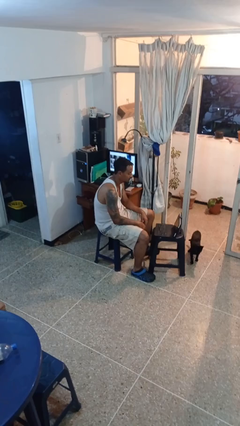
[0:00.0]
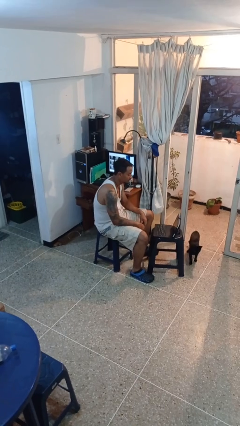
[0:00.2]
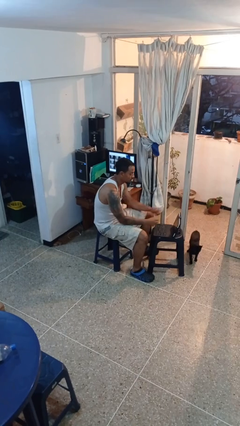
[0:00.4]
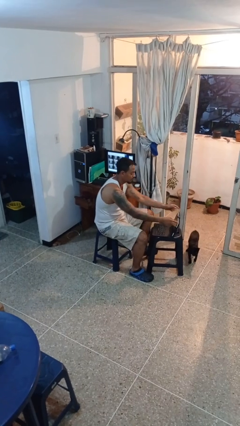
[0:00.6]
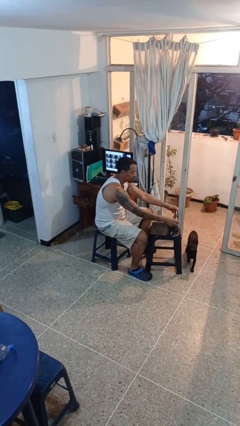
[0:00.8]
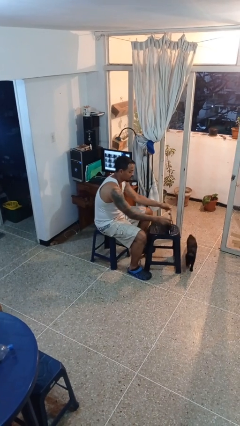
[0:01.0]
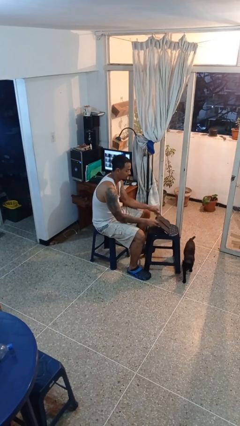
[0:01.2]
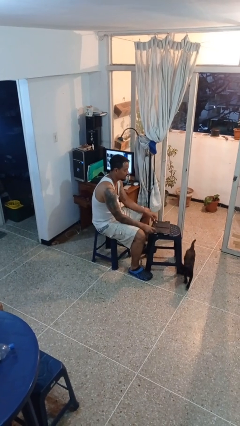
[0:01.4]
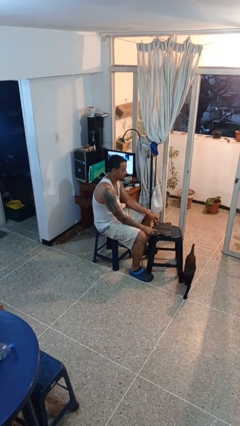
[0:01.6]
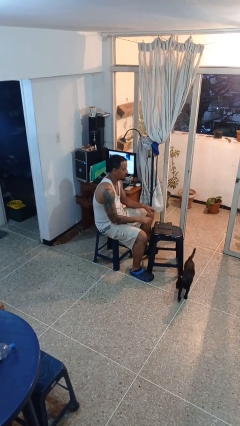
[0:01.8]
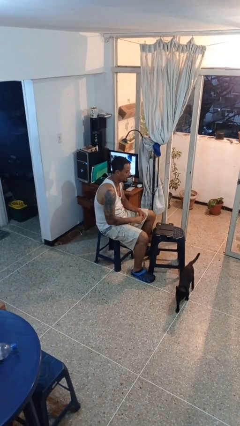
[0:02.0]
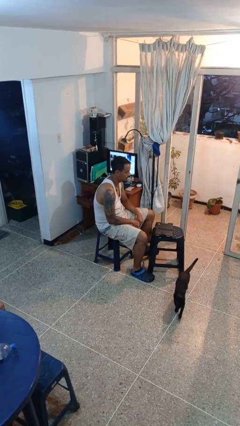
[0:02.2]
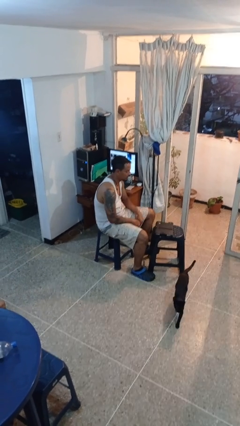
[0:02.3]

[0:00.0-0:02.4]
person closes laptop

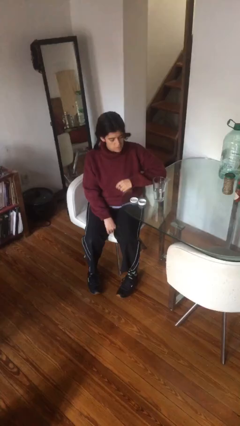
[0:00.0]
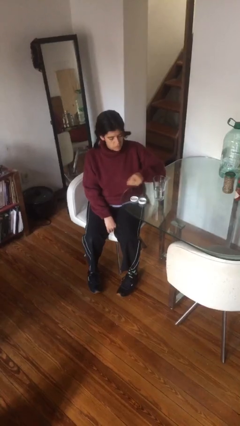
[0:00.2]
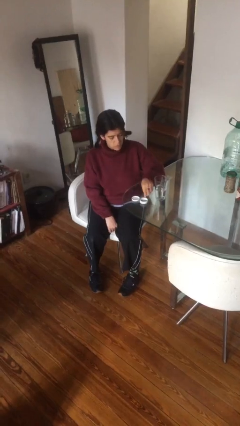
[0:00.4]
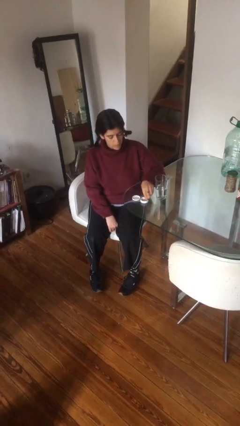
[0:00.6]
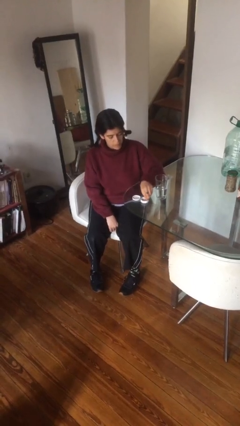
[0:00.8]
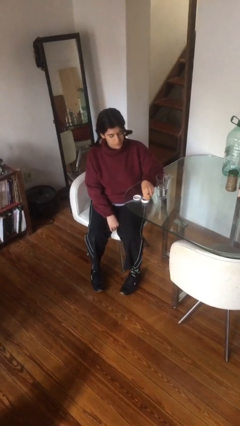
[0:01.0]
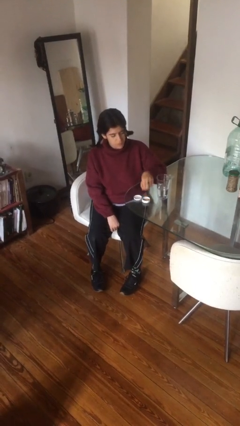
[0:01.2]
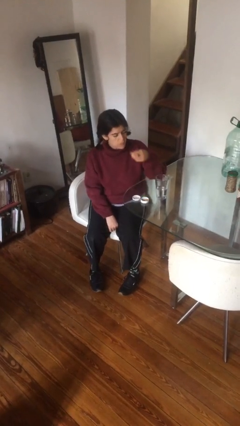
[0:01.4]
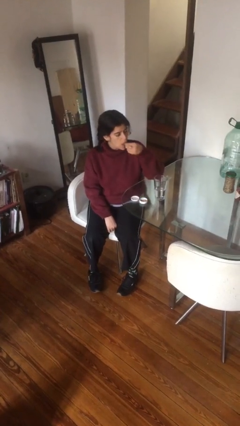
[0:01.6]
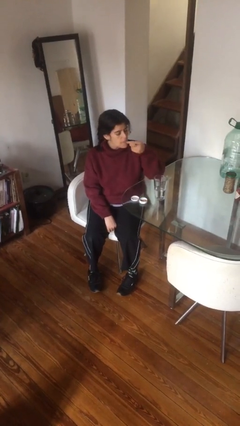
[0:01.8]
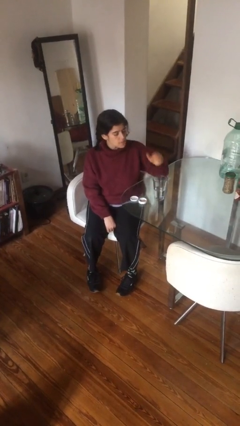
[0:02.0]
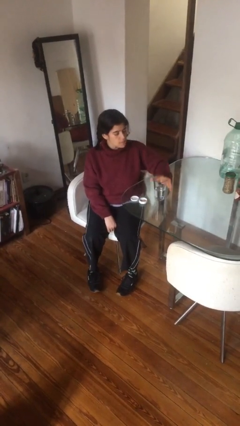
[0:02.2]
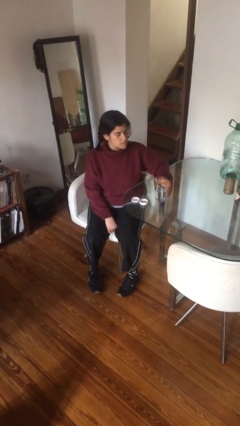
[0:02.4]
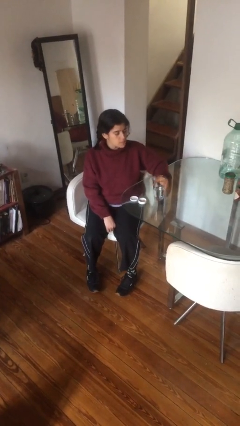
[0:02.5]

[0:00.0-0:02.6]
person takes medicine pills

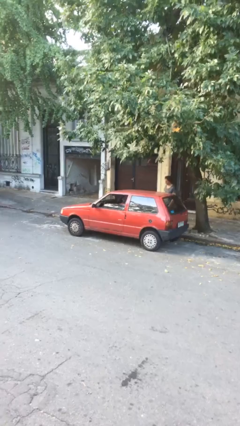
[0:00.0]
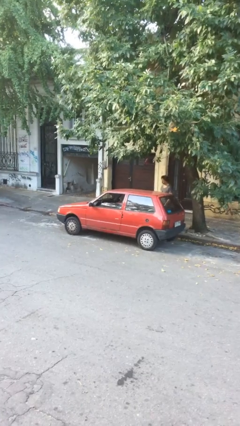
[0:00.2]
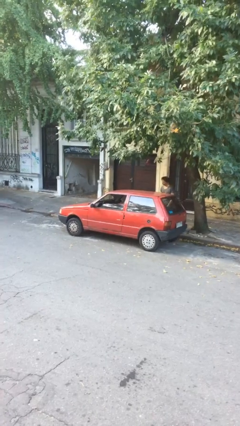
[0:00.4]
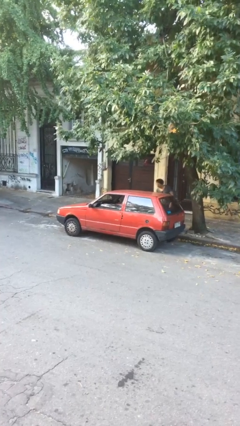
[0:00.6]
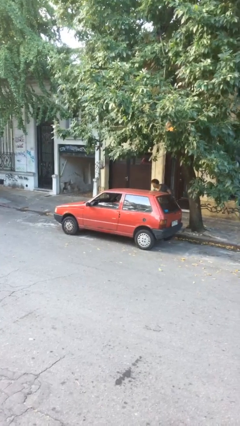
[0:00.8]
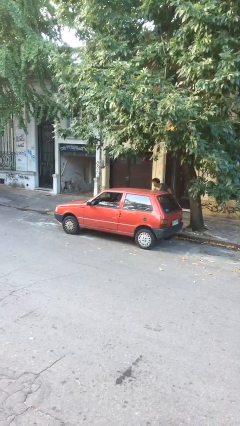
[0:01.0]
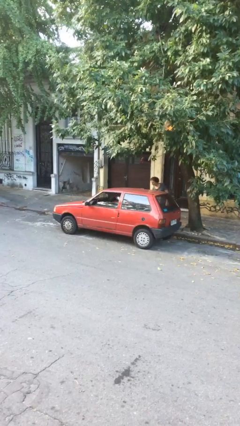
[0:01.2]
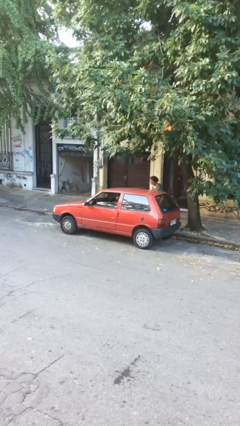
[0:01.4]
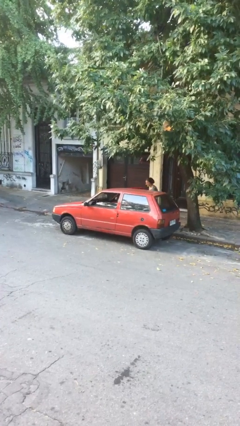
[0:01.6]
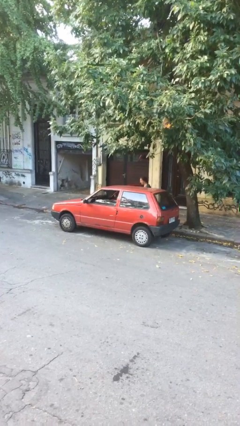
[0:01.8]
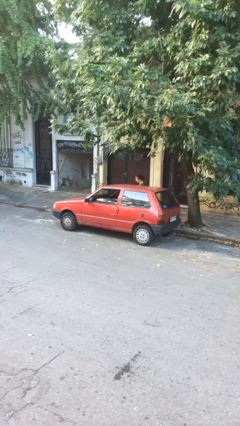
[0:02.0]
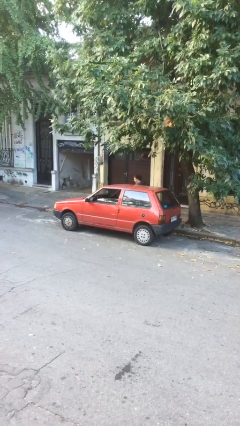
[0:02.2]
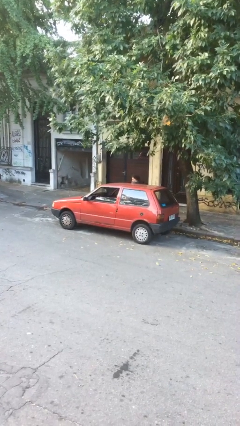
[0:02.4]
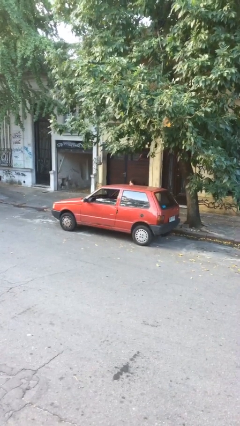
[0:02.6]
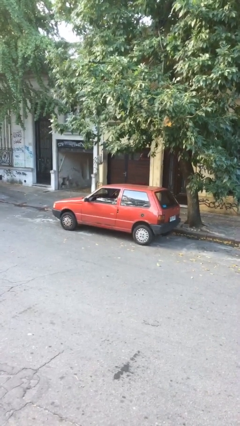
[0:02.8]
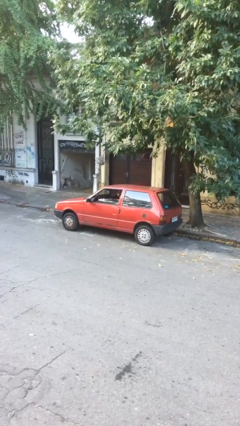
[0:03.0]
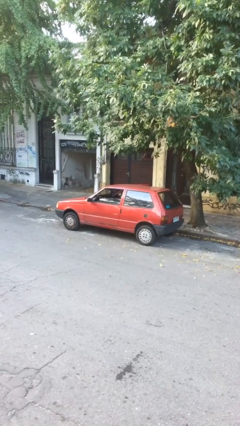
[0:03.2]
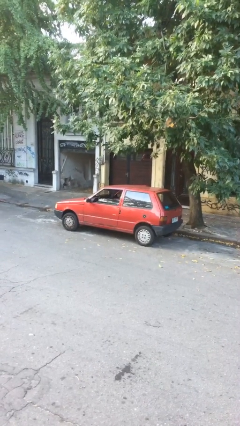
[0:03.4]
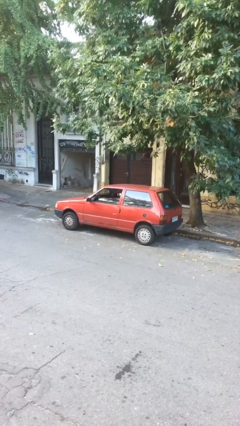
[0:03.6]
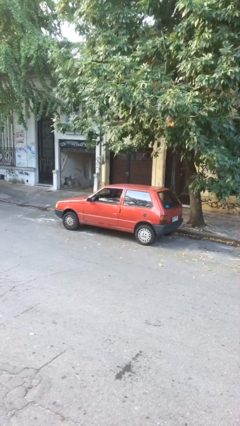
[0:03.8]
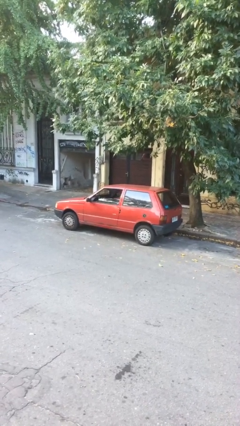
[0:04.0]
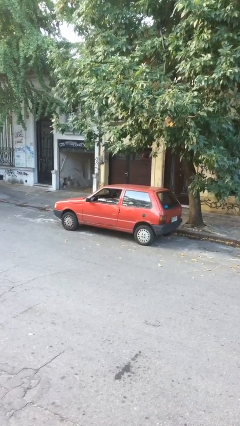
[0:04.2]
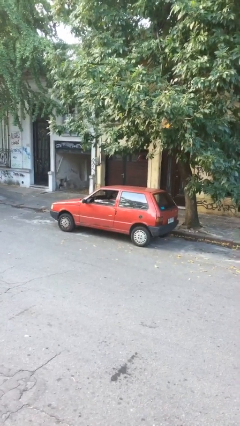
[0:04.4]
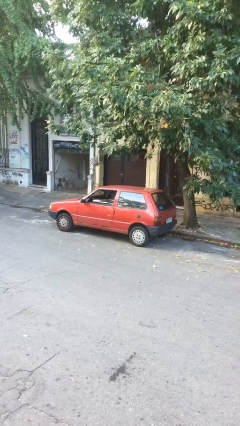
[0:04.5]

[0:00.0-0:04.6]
car picks up person

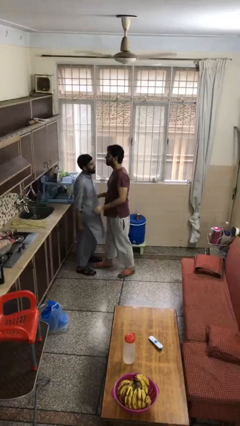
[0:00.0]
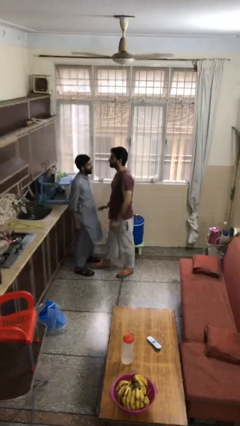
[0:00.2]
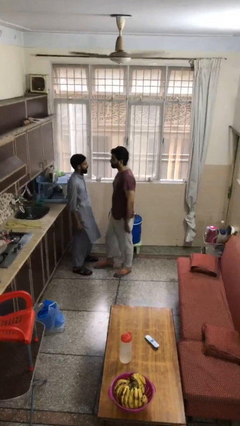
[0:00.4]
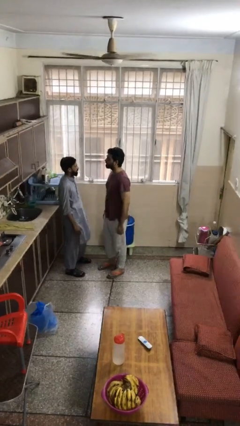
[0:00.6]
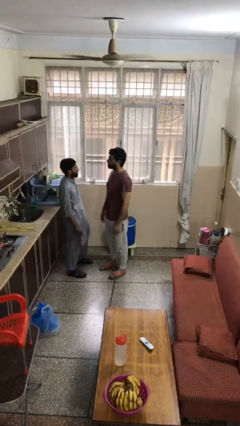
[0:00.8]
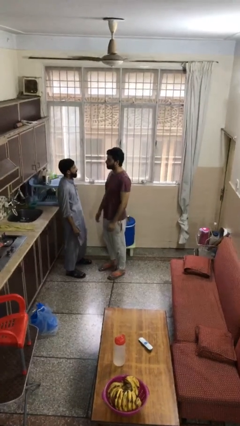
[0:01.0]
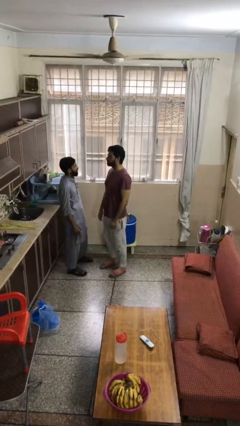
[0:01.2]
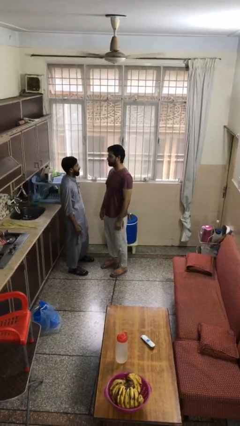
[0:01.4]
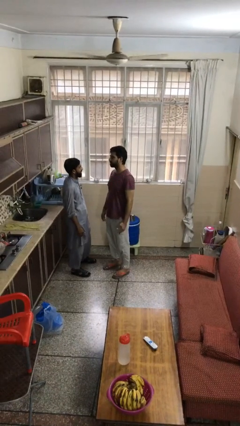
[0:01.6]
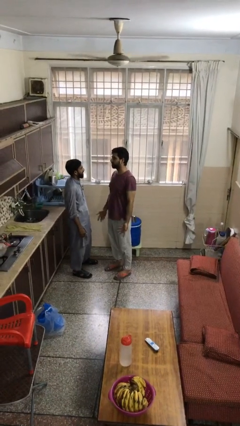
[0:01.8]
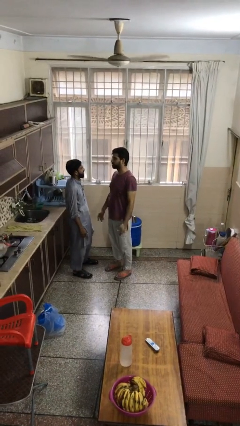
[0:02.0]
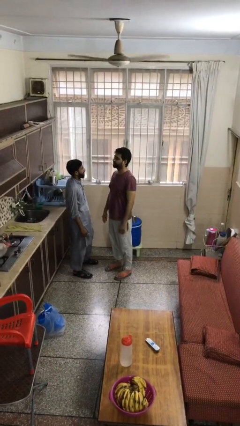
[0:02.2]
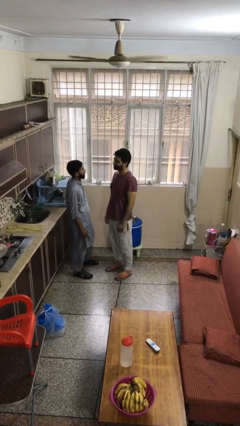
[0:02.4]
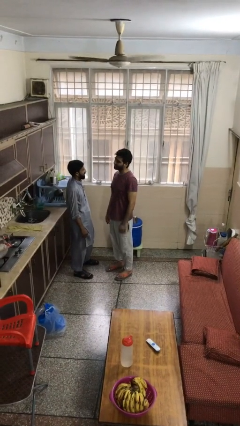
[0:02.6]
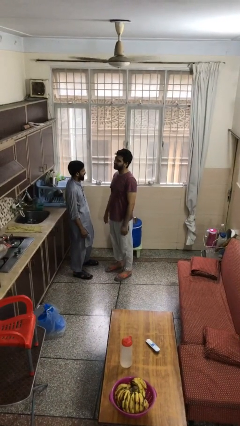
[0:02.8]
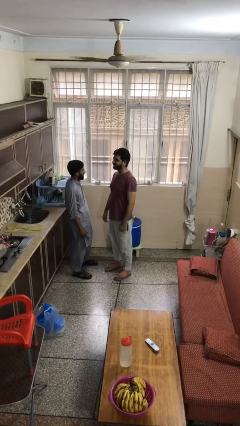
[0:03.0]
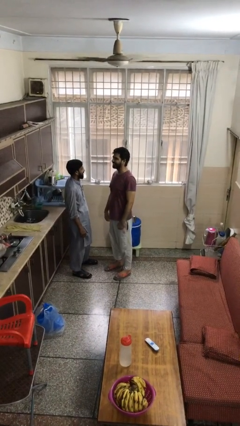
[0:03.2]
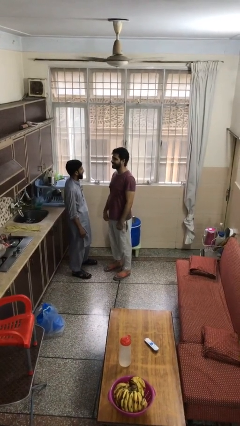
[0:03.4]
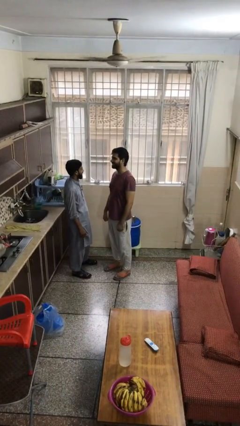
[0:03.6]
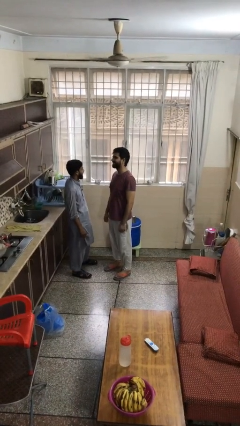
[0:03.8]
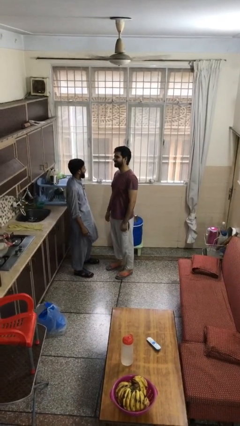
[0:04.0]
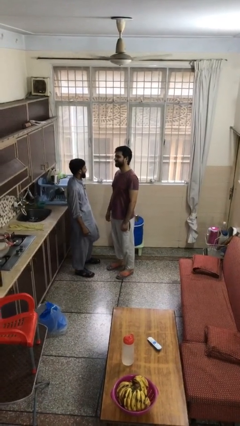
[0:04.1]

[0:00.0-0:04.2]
person talks to person

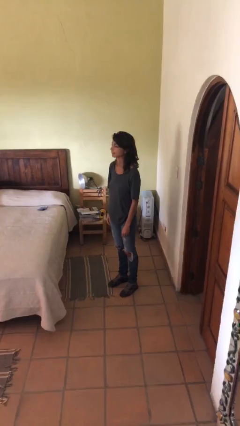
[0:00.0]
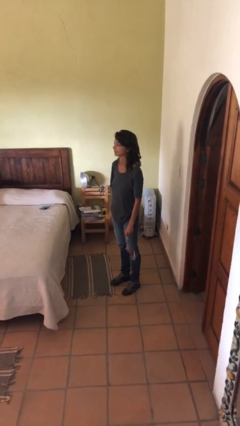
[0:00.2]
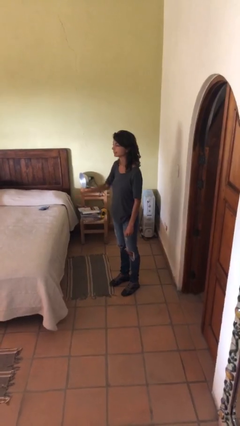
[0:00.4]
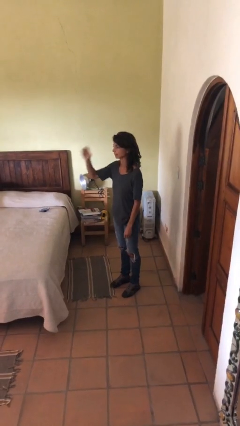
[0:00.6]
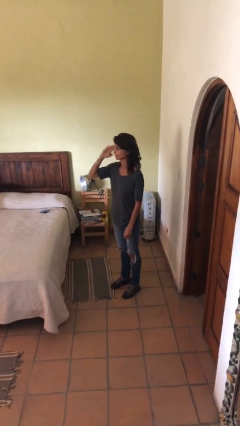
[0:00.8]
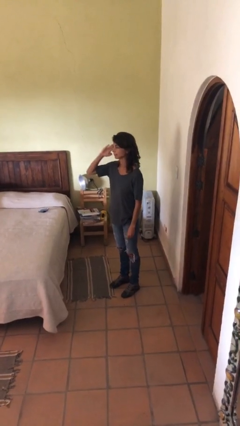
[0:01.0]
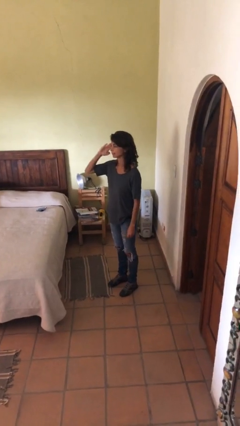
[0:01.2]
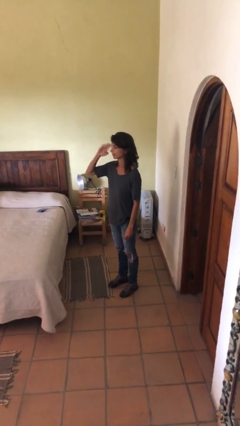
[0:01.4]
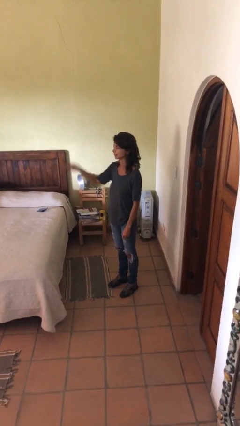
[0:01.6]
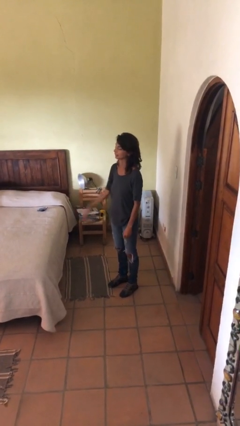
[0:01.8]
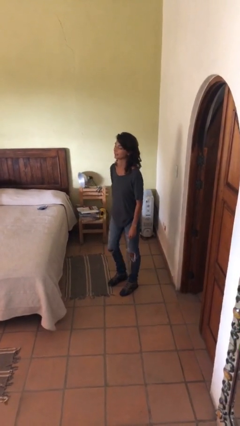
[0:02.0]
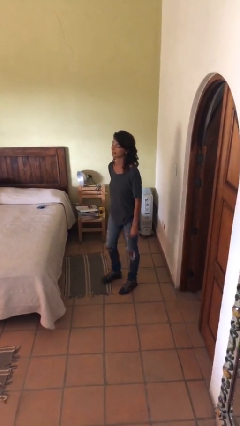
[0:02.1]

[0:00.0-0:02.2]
person salutes

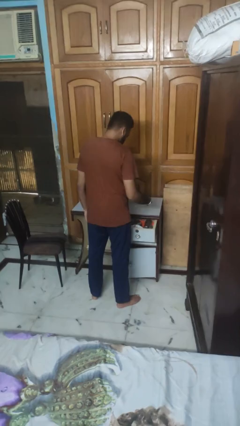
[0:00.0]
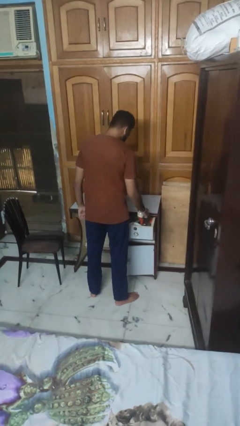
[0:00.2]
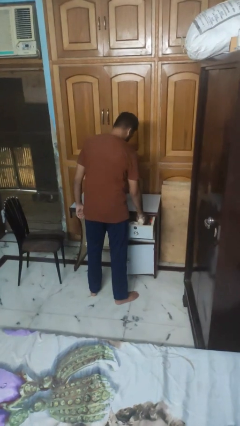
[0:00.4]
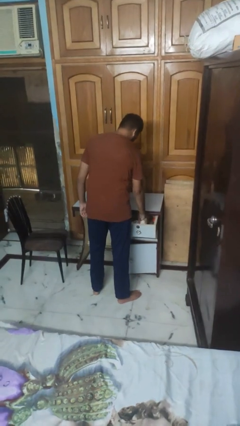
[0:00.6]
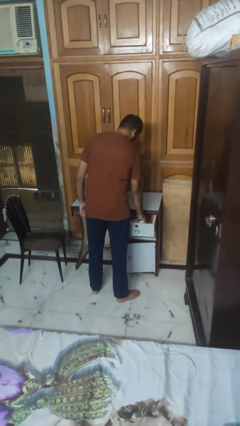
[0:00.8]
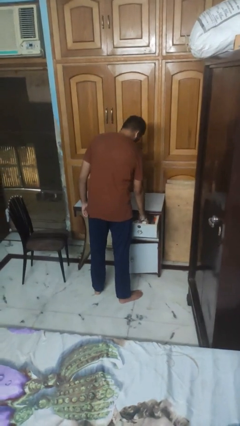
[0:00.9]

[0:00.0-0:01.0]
person puts object into kitchen drawer
